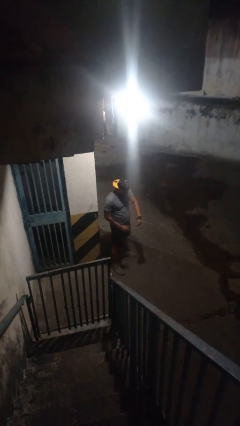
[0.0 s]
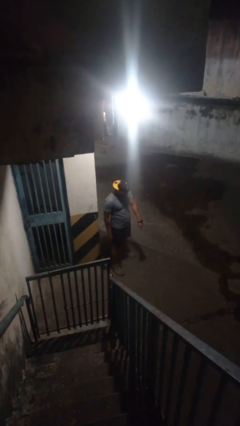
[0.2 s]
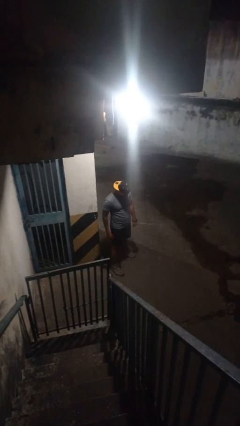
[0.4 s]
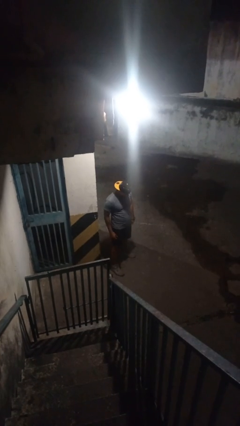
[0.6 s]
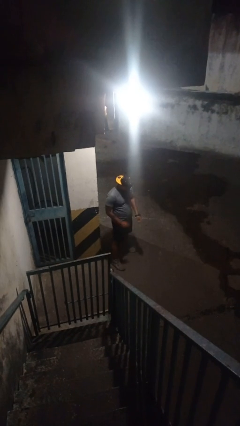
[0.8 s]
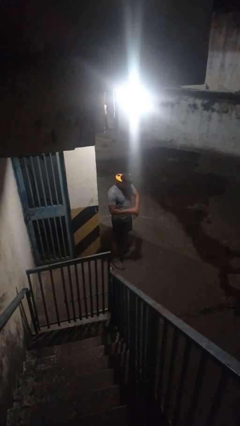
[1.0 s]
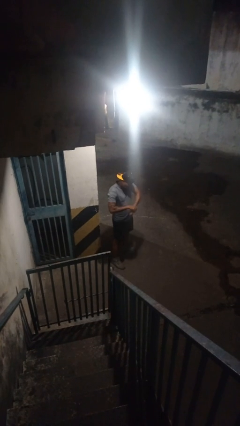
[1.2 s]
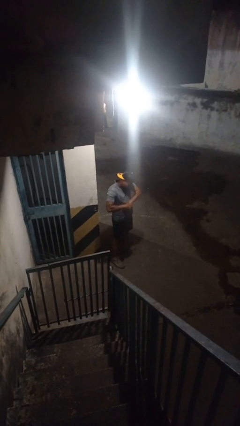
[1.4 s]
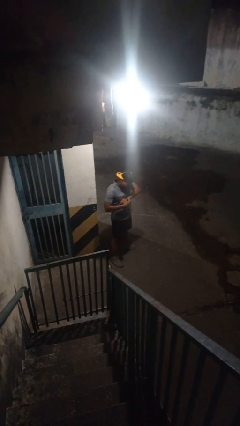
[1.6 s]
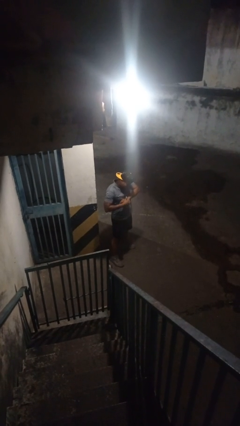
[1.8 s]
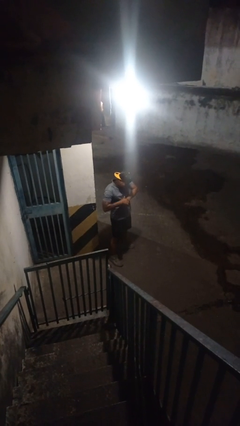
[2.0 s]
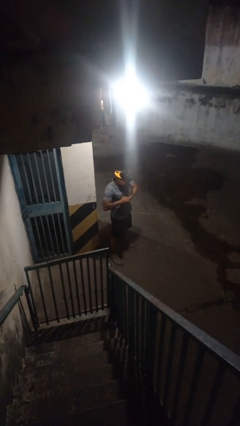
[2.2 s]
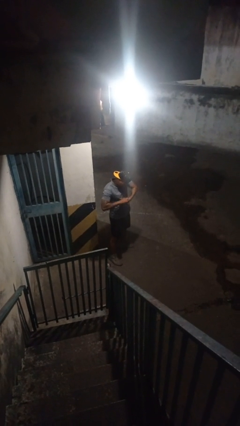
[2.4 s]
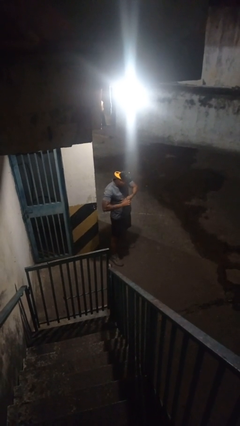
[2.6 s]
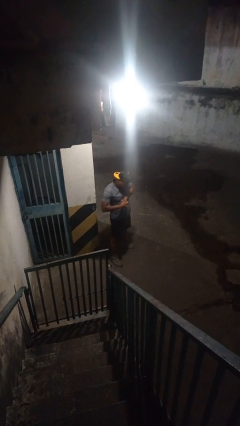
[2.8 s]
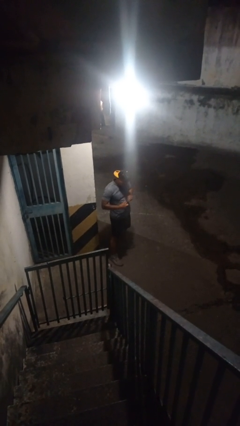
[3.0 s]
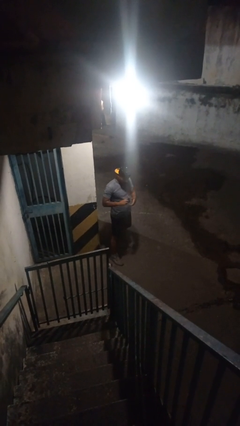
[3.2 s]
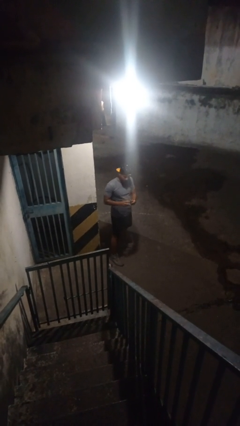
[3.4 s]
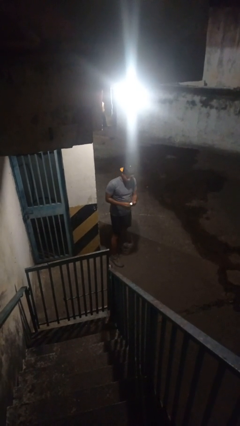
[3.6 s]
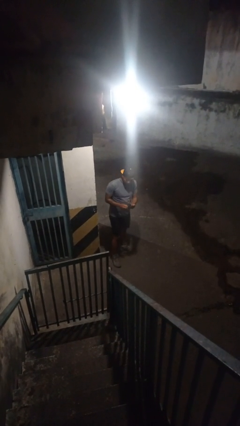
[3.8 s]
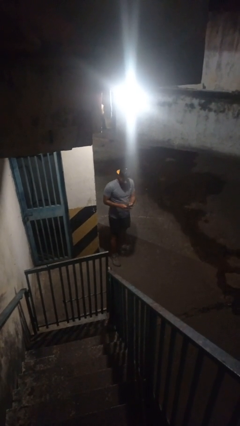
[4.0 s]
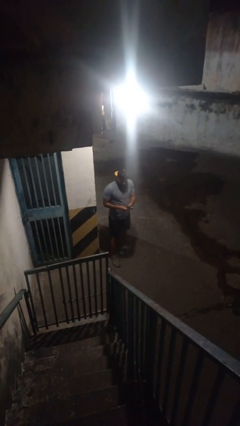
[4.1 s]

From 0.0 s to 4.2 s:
person takes off wristwatch

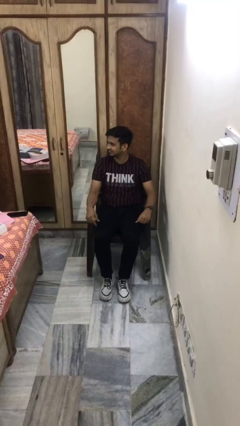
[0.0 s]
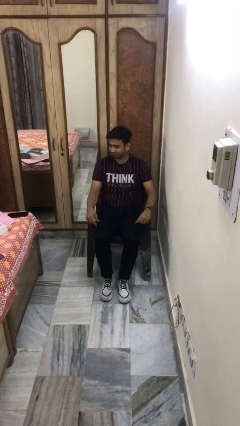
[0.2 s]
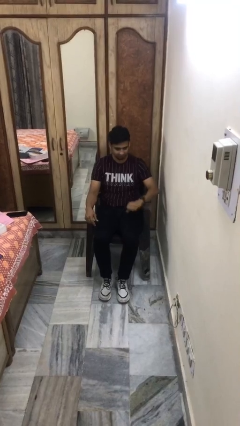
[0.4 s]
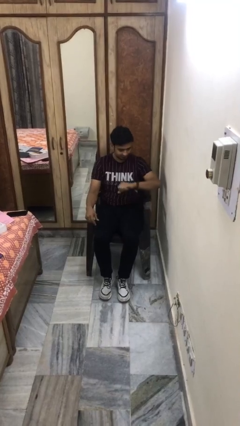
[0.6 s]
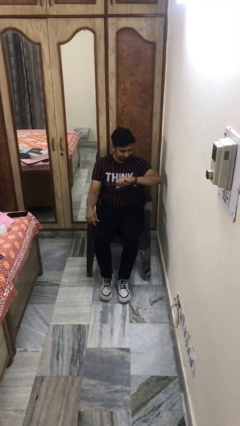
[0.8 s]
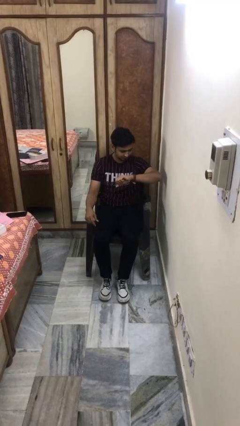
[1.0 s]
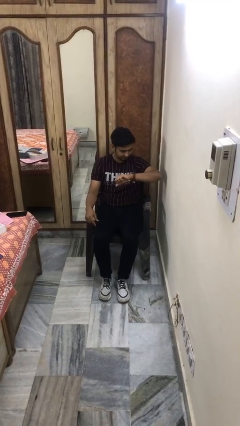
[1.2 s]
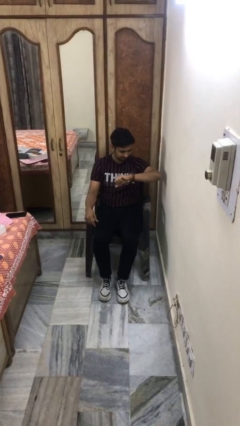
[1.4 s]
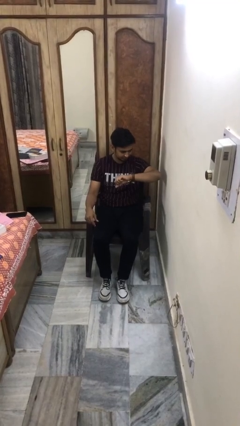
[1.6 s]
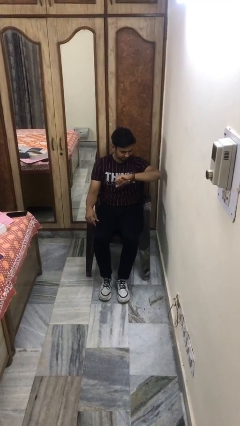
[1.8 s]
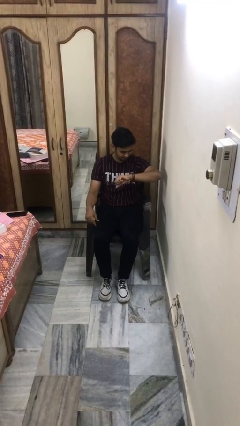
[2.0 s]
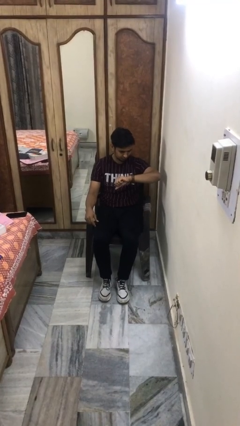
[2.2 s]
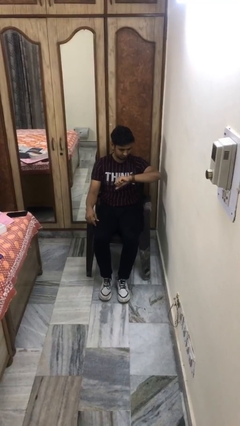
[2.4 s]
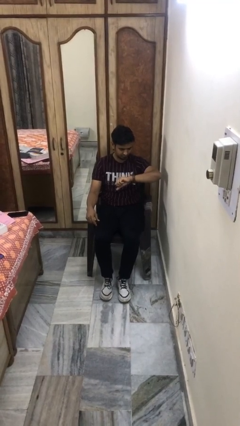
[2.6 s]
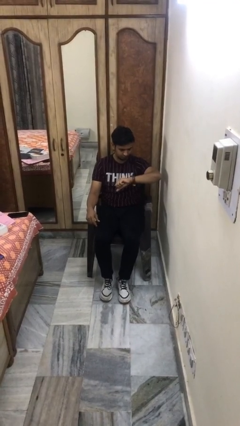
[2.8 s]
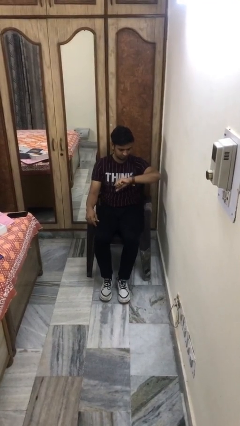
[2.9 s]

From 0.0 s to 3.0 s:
person looks at wristwatch

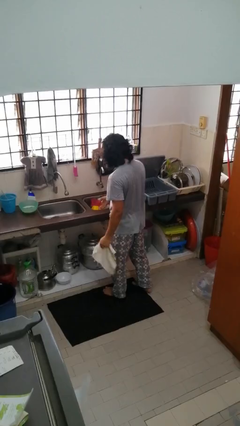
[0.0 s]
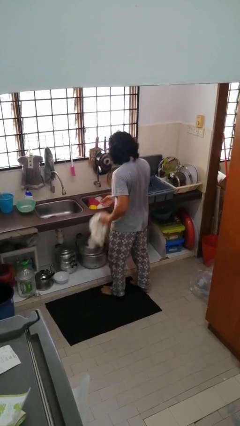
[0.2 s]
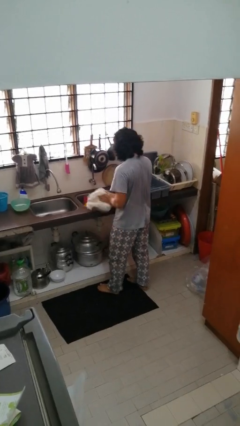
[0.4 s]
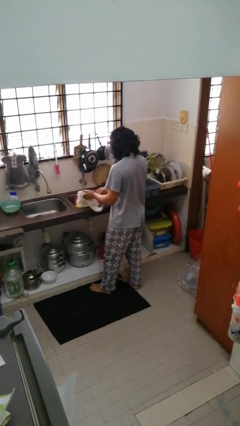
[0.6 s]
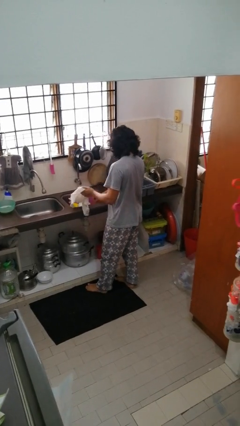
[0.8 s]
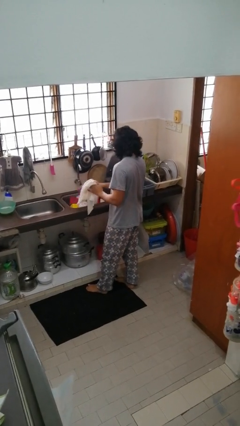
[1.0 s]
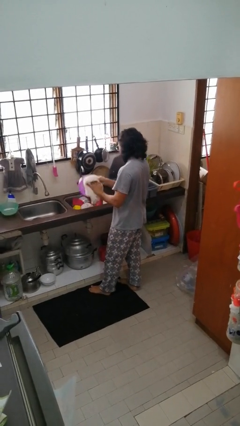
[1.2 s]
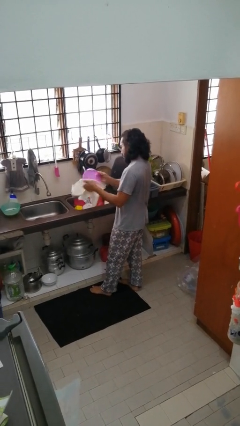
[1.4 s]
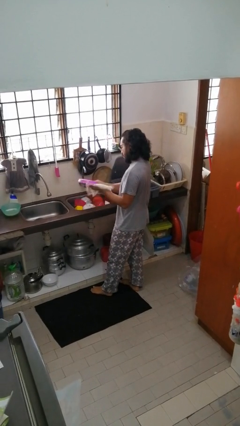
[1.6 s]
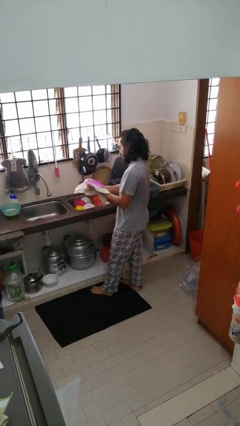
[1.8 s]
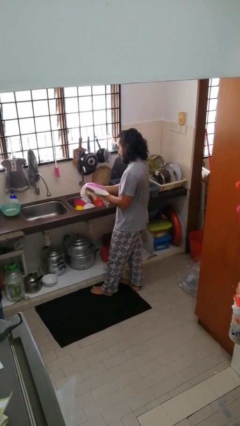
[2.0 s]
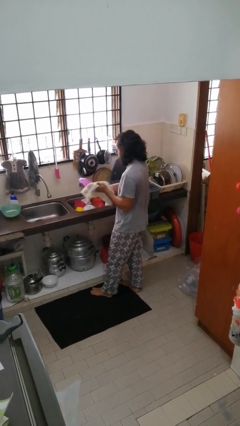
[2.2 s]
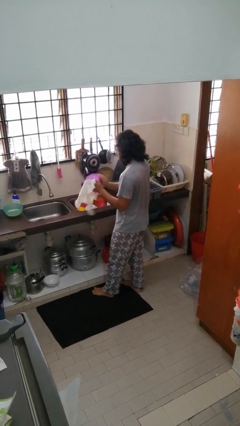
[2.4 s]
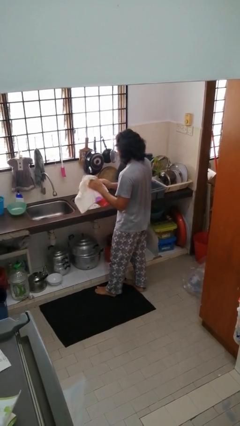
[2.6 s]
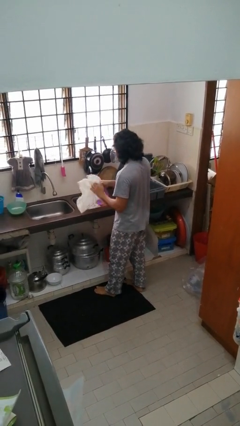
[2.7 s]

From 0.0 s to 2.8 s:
person dries dish

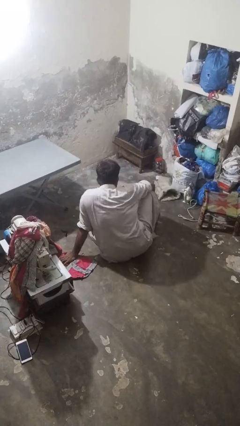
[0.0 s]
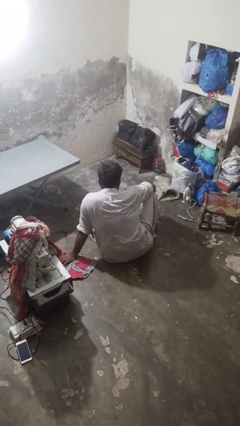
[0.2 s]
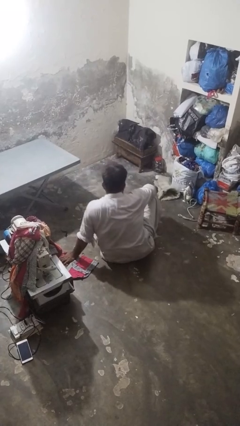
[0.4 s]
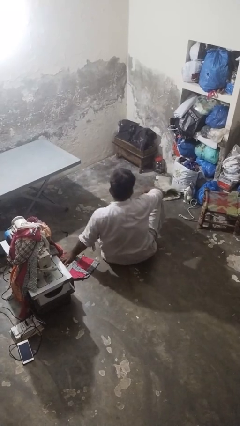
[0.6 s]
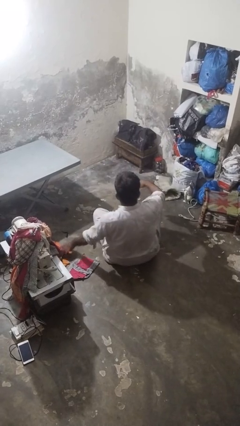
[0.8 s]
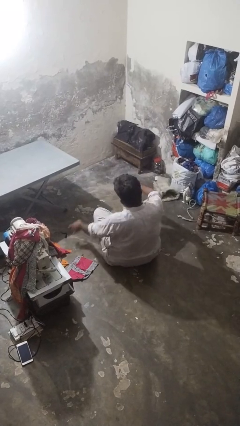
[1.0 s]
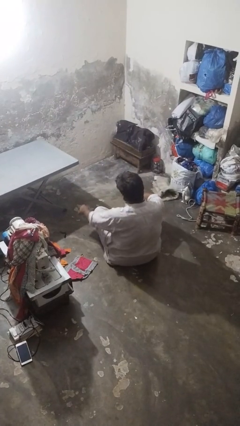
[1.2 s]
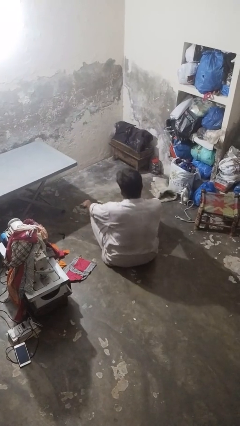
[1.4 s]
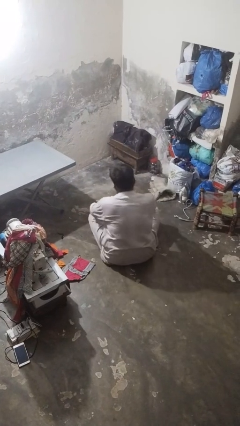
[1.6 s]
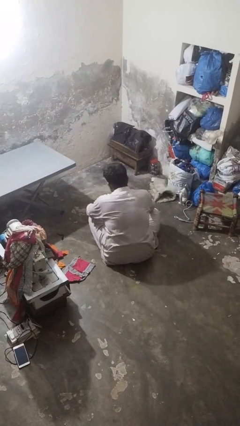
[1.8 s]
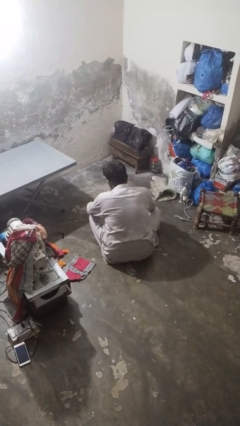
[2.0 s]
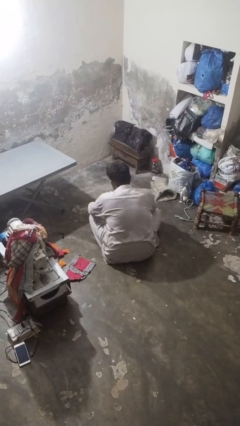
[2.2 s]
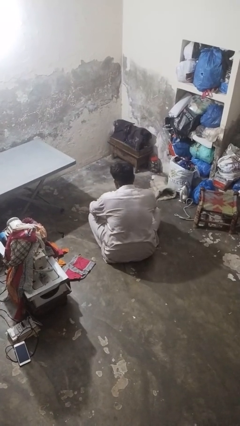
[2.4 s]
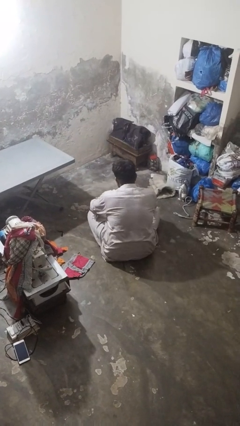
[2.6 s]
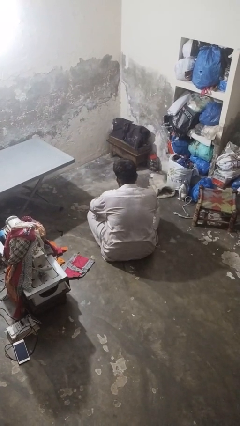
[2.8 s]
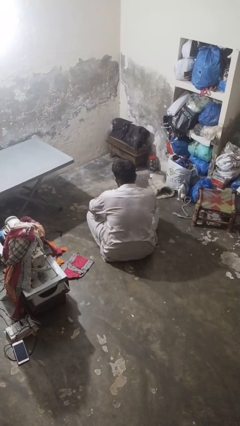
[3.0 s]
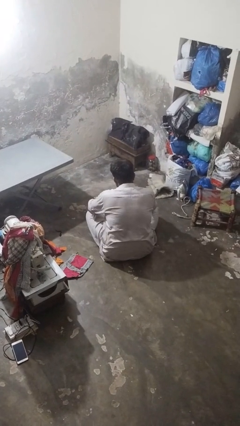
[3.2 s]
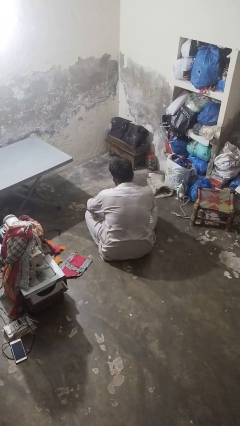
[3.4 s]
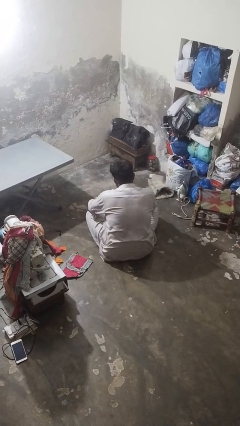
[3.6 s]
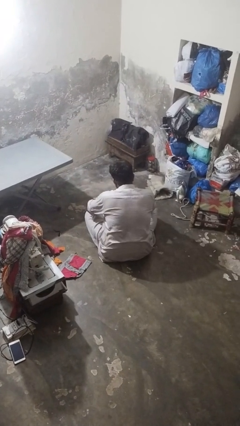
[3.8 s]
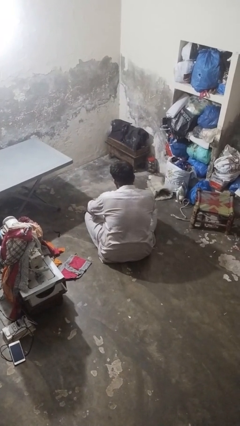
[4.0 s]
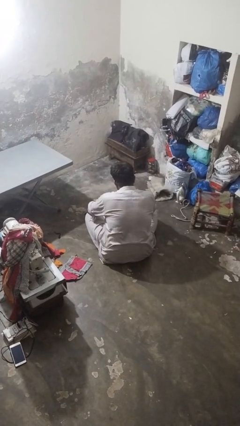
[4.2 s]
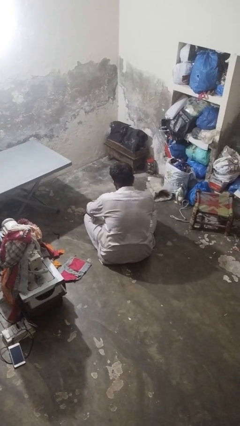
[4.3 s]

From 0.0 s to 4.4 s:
person crosses legs

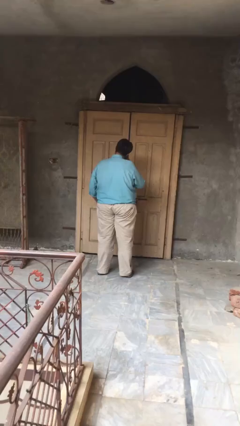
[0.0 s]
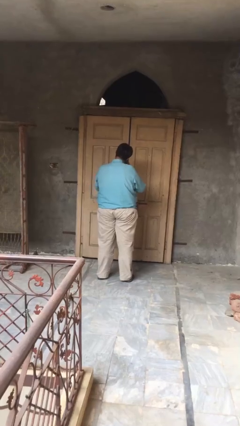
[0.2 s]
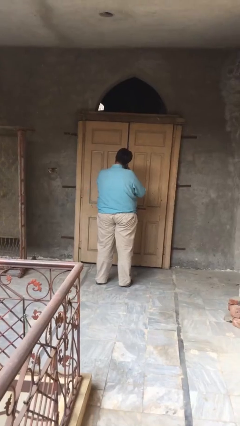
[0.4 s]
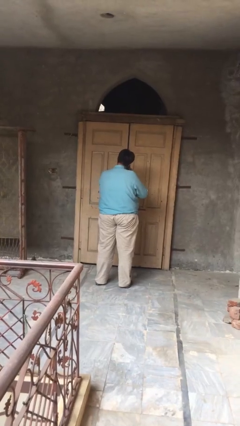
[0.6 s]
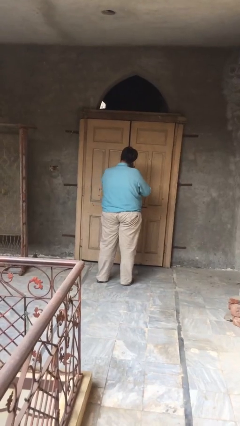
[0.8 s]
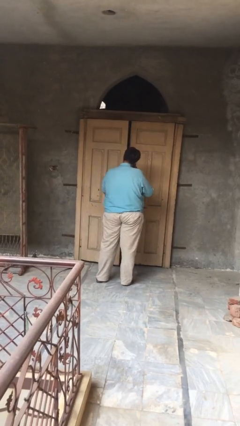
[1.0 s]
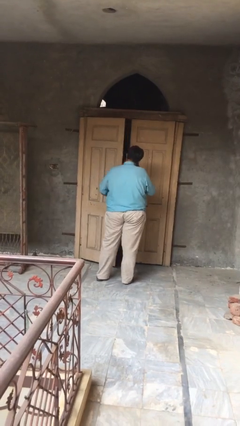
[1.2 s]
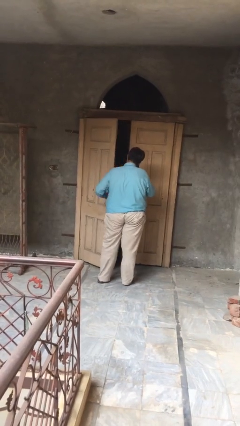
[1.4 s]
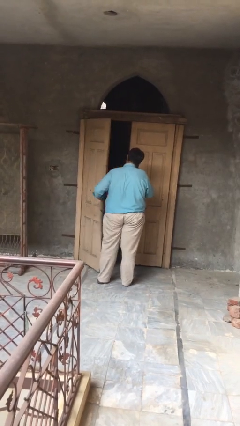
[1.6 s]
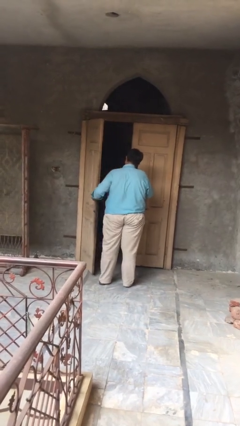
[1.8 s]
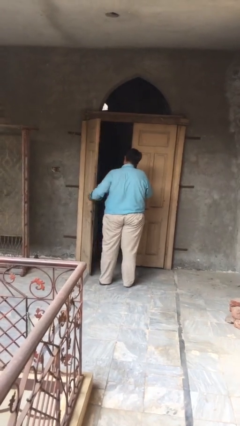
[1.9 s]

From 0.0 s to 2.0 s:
person opens facility door

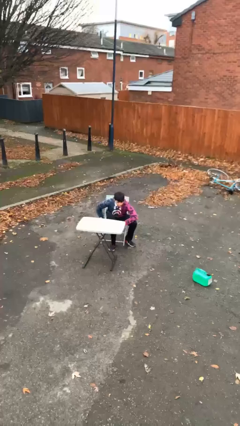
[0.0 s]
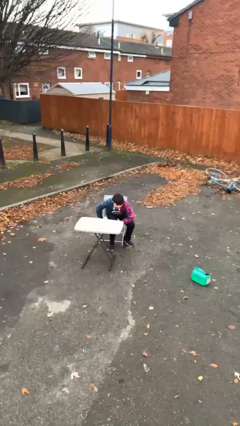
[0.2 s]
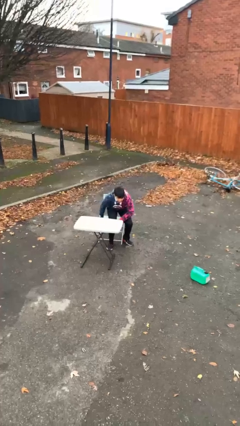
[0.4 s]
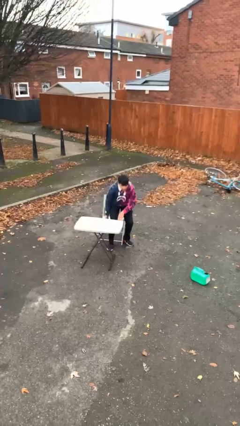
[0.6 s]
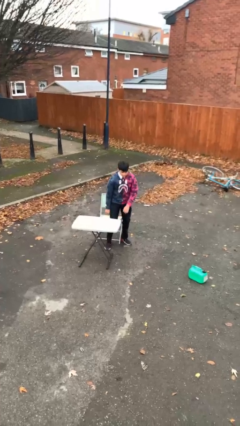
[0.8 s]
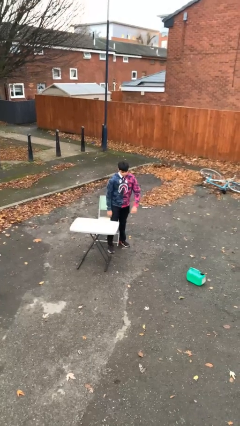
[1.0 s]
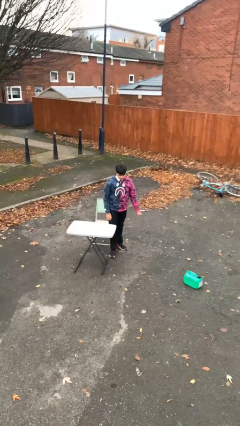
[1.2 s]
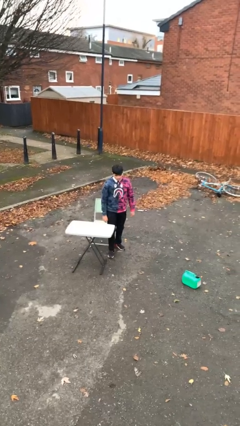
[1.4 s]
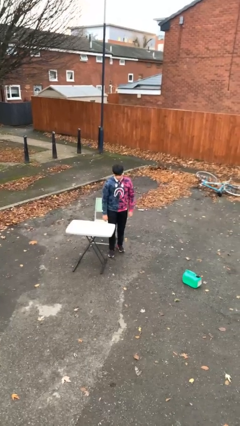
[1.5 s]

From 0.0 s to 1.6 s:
person stands up
